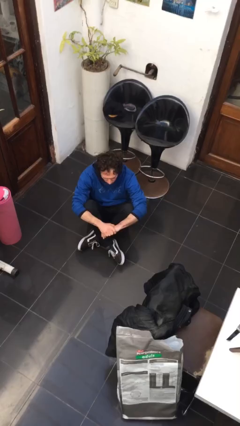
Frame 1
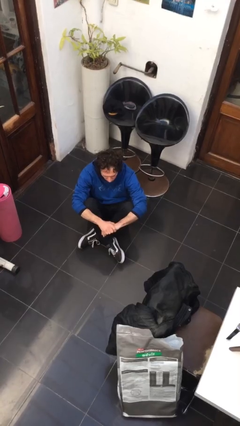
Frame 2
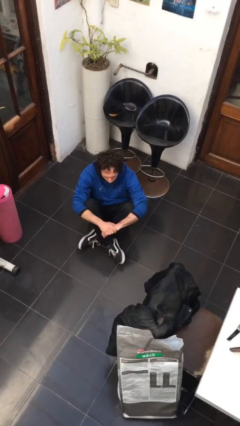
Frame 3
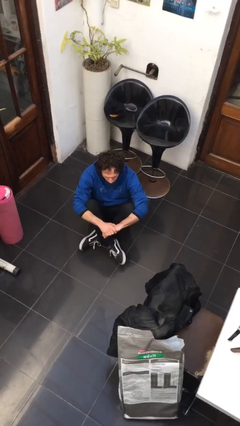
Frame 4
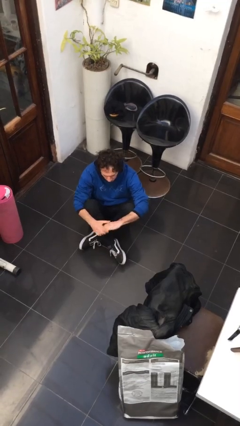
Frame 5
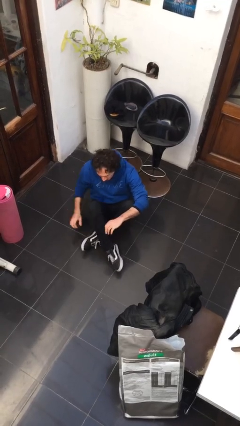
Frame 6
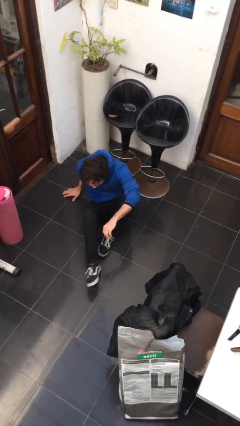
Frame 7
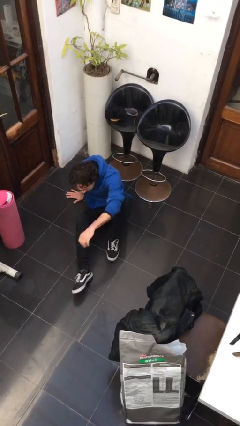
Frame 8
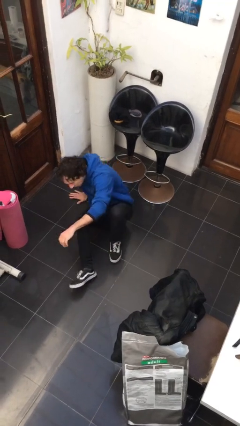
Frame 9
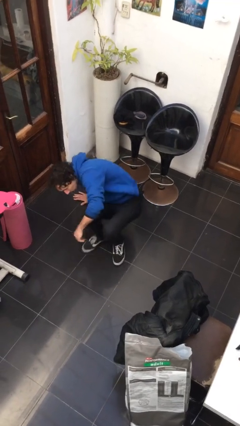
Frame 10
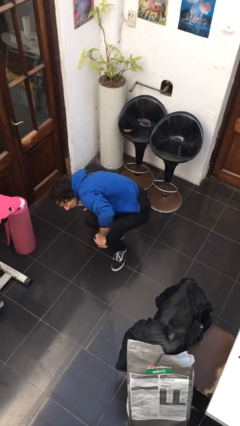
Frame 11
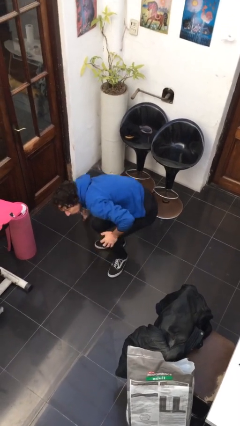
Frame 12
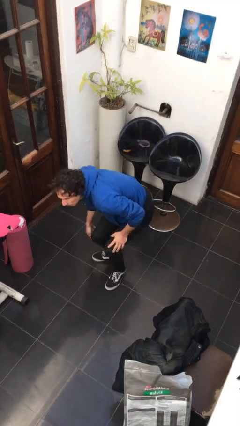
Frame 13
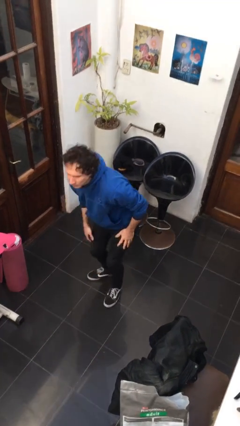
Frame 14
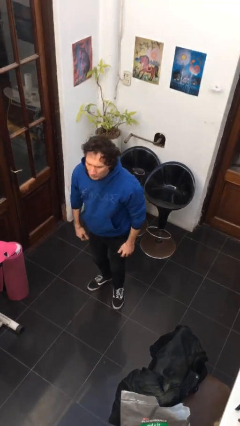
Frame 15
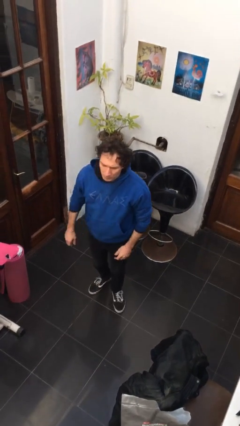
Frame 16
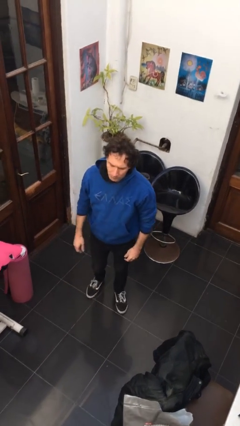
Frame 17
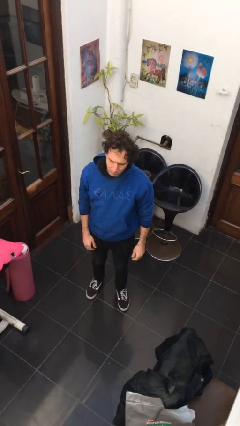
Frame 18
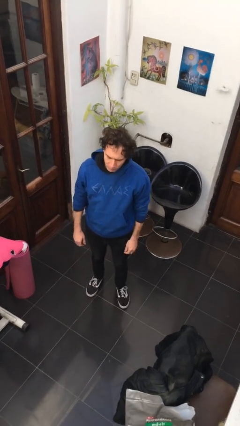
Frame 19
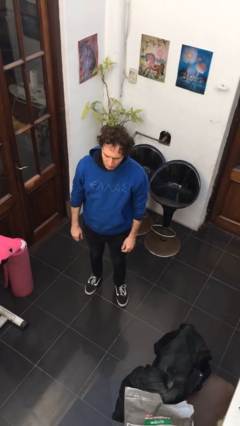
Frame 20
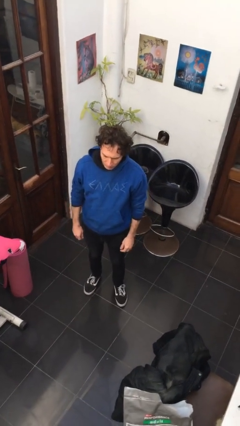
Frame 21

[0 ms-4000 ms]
person stands up from floor

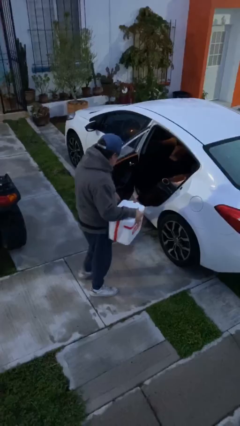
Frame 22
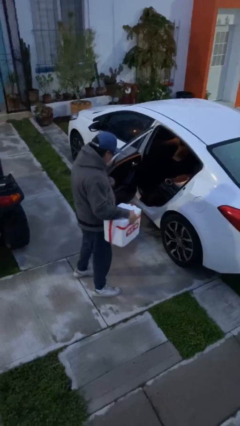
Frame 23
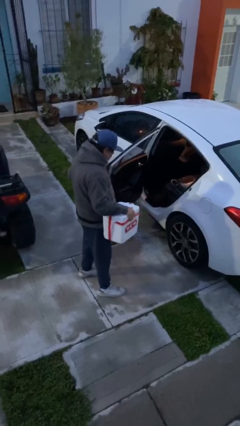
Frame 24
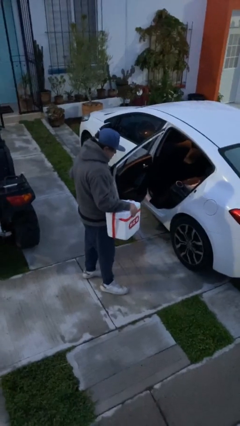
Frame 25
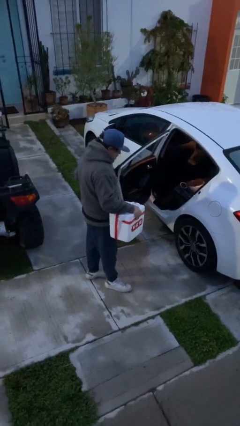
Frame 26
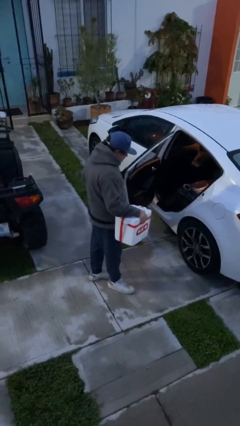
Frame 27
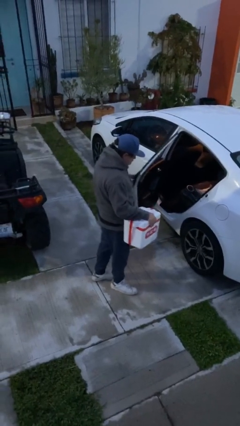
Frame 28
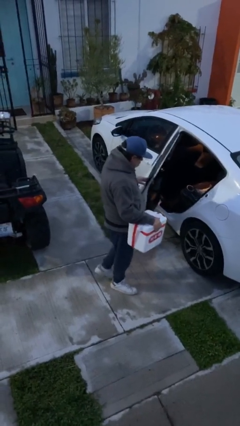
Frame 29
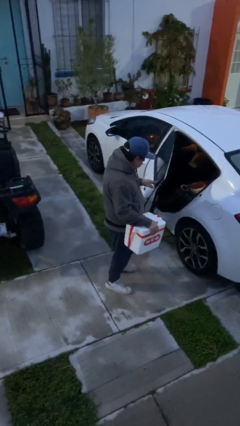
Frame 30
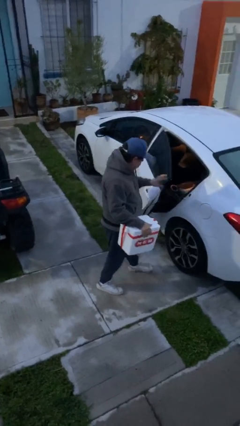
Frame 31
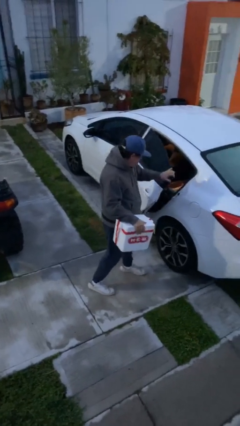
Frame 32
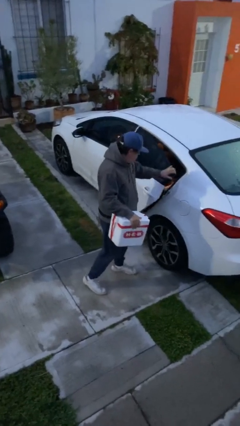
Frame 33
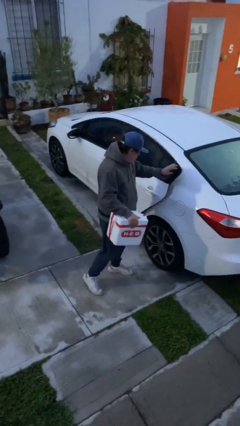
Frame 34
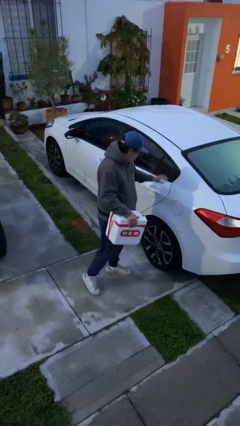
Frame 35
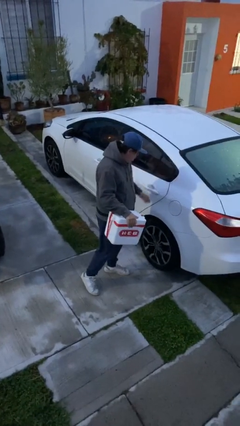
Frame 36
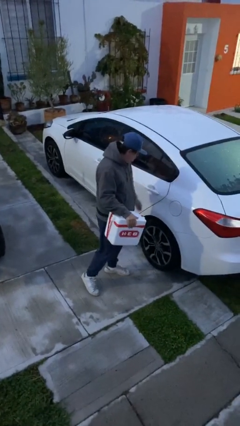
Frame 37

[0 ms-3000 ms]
person closes car door

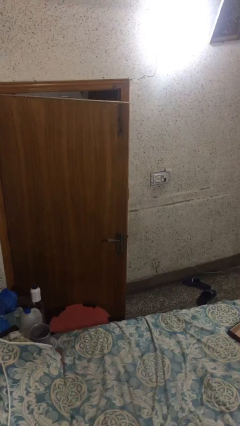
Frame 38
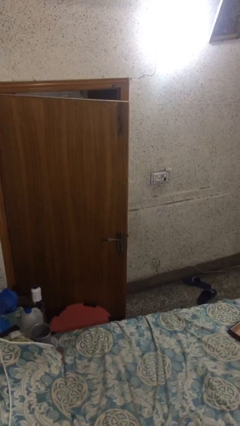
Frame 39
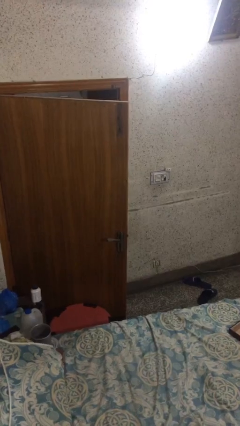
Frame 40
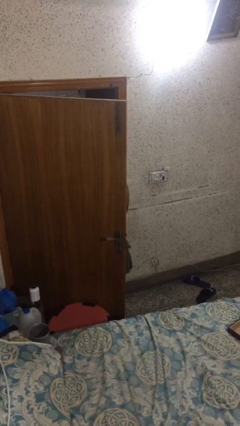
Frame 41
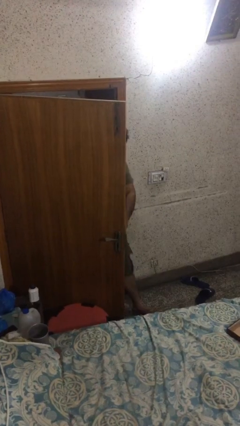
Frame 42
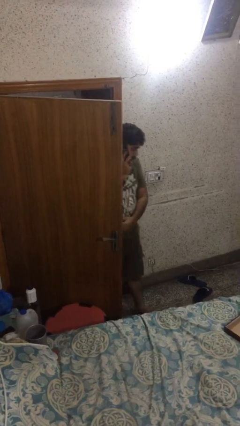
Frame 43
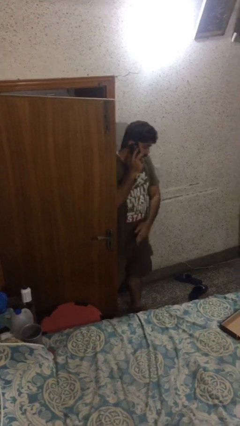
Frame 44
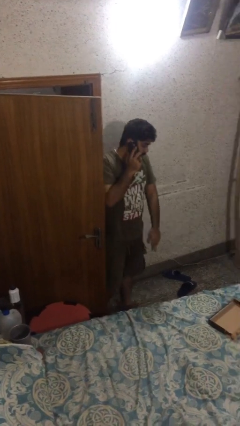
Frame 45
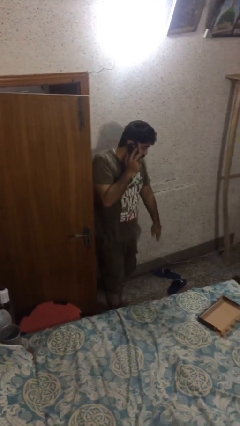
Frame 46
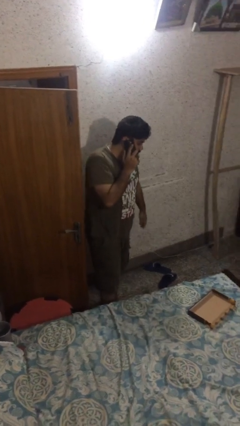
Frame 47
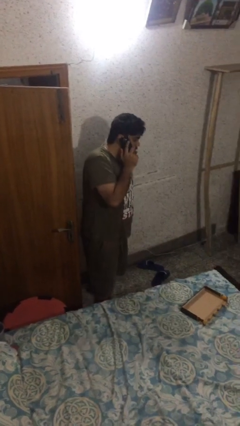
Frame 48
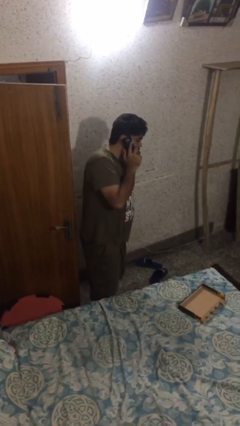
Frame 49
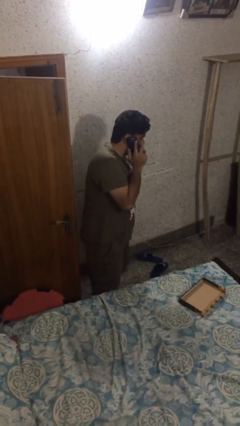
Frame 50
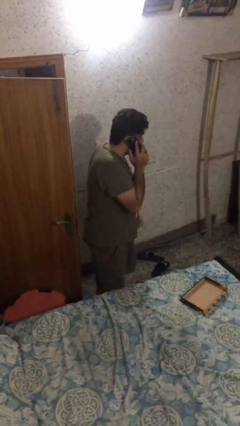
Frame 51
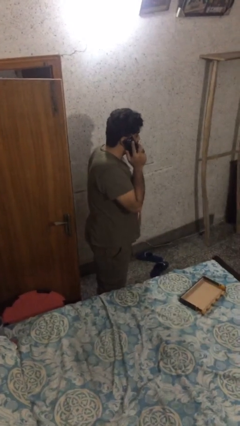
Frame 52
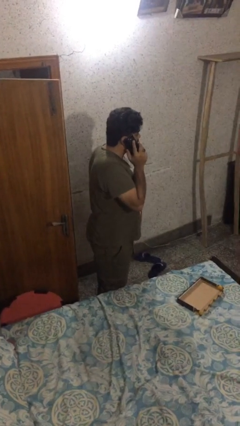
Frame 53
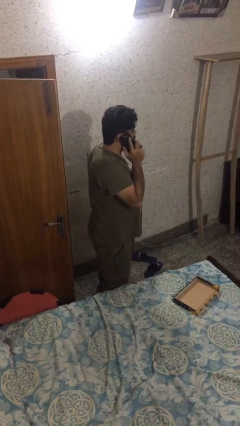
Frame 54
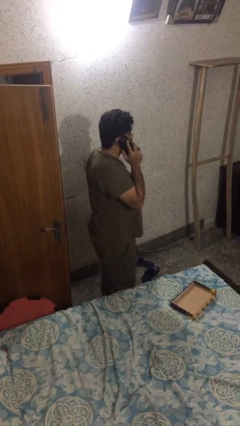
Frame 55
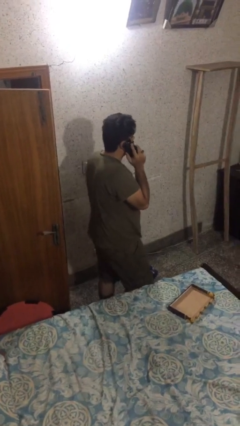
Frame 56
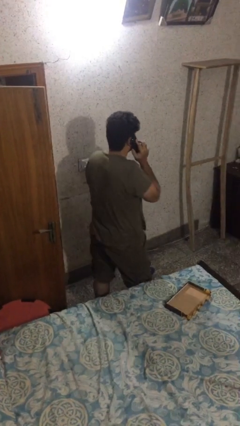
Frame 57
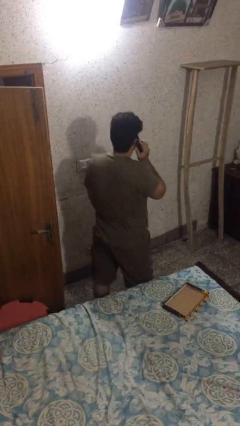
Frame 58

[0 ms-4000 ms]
person enters scene through structure

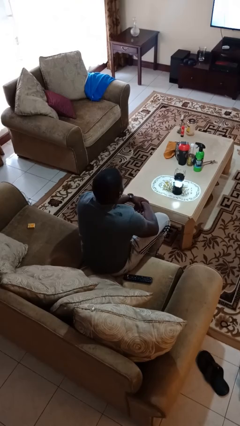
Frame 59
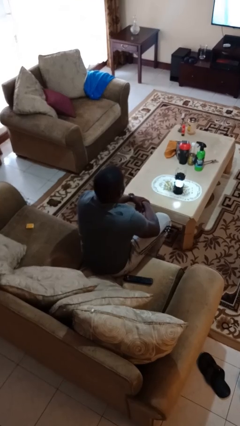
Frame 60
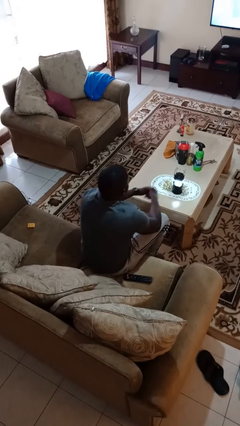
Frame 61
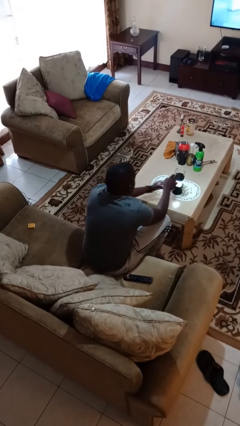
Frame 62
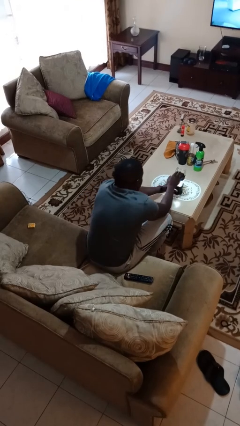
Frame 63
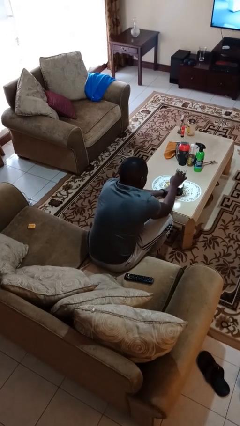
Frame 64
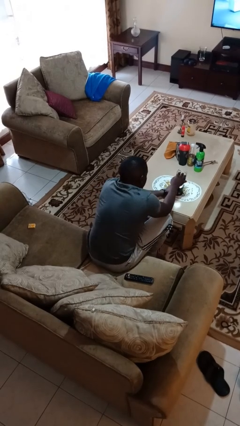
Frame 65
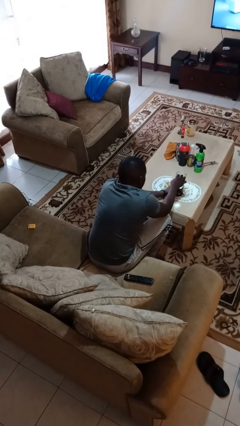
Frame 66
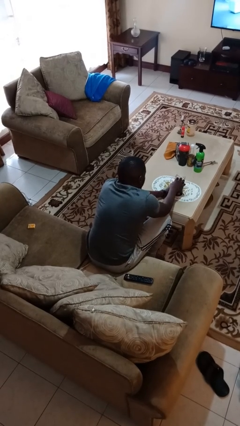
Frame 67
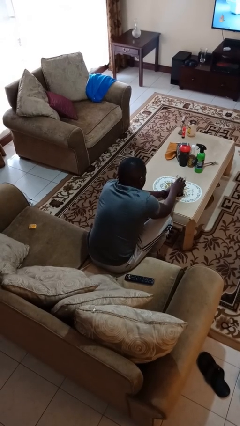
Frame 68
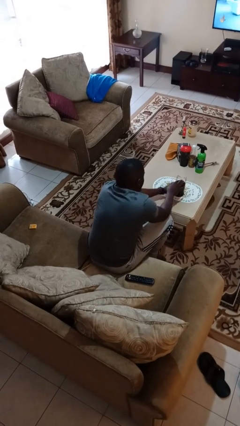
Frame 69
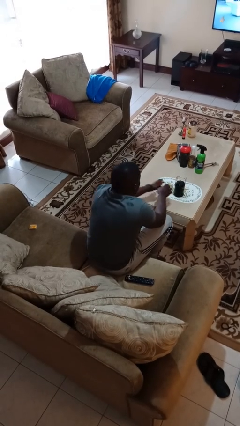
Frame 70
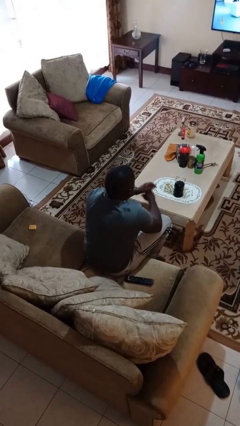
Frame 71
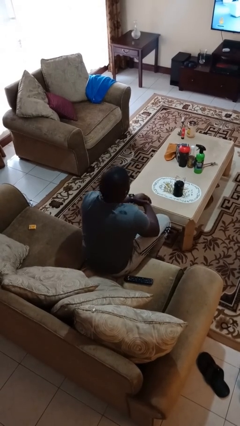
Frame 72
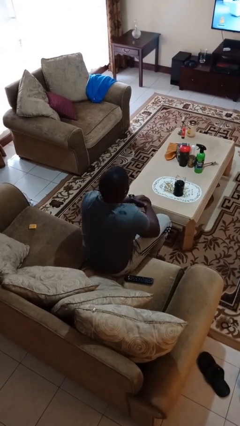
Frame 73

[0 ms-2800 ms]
person turns off lamp

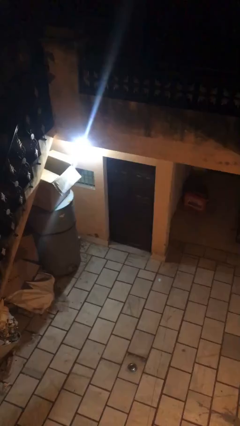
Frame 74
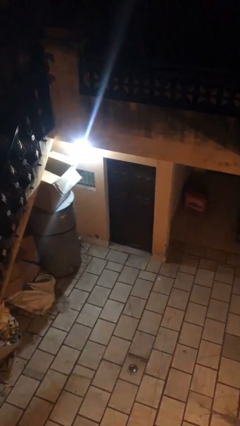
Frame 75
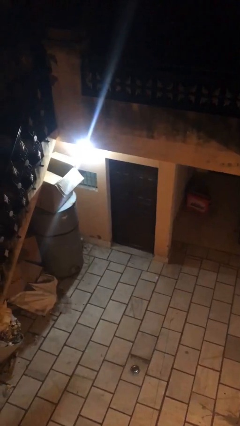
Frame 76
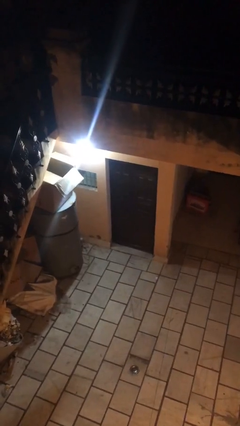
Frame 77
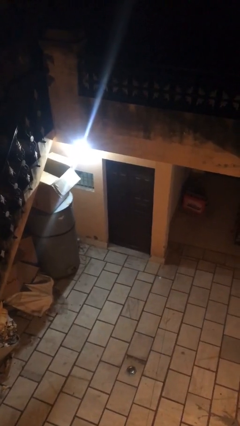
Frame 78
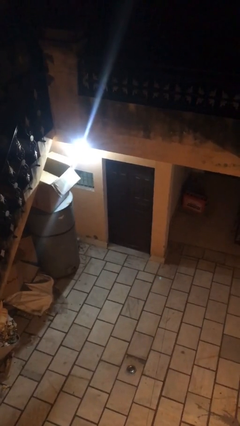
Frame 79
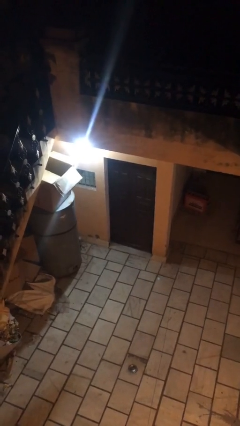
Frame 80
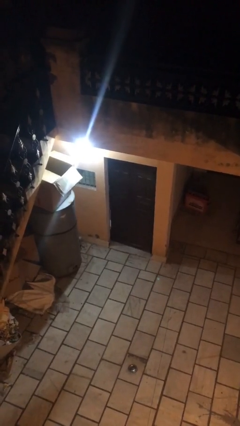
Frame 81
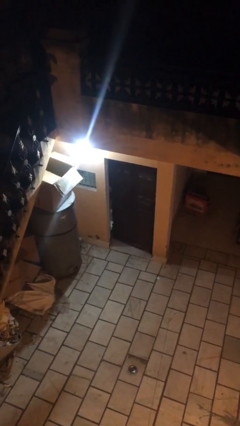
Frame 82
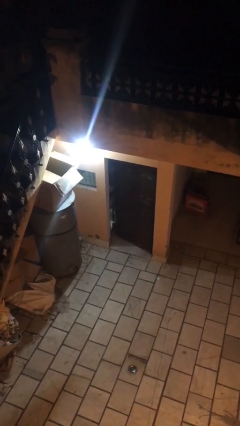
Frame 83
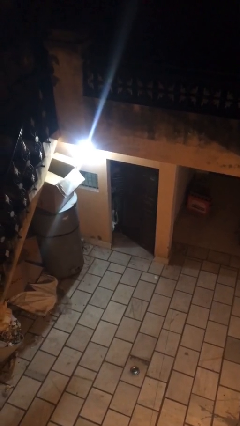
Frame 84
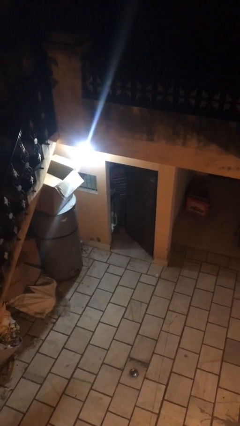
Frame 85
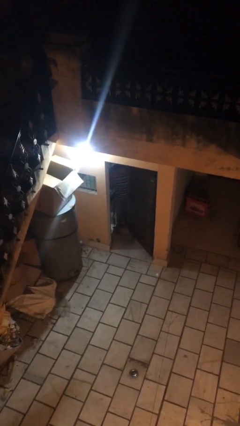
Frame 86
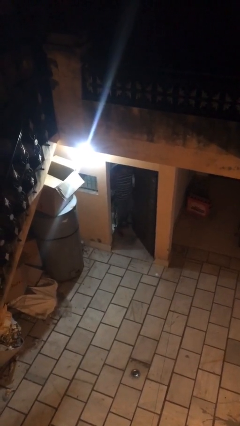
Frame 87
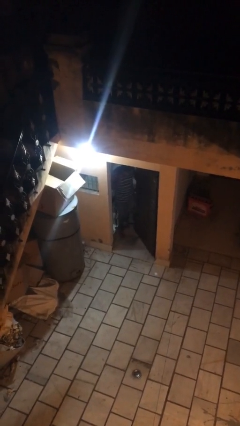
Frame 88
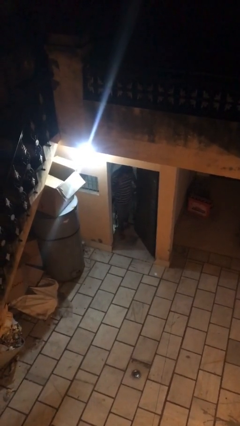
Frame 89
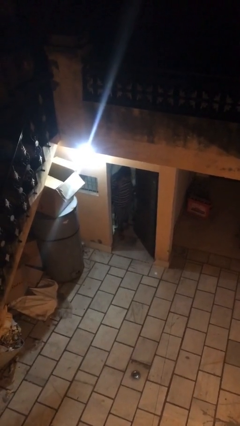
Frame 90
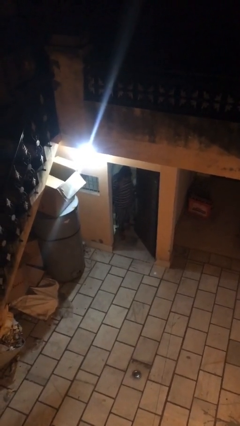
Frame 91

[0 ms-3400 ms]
person opens facility door

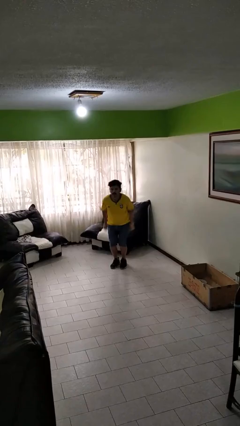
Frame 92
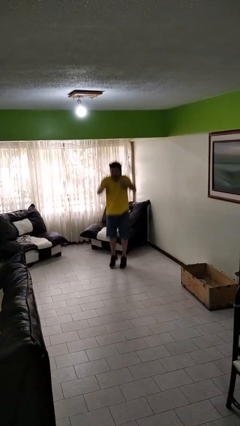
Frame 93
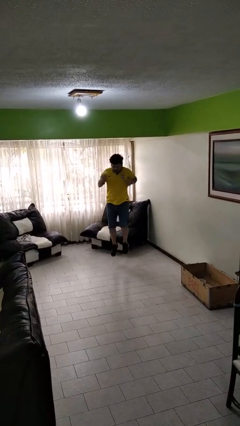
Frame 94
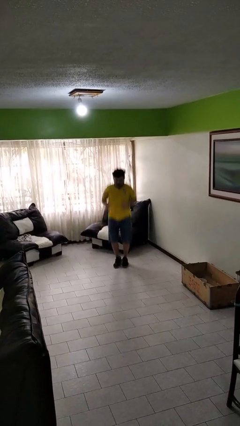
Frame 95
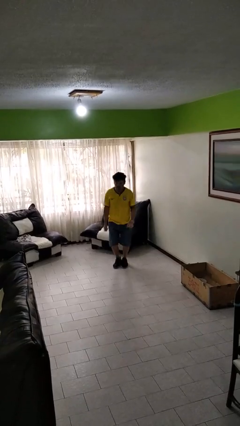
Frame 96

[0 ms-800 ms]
person jumps
